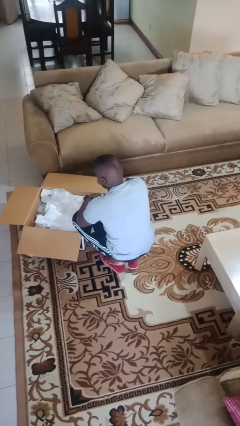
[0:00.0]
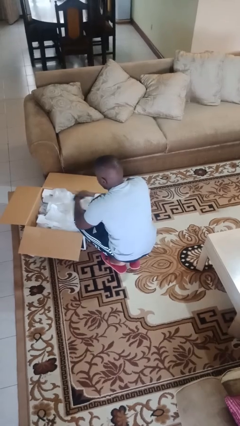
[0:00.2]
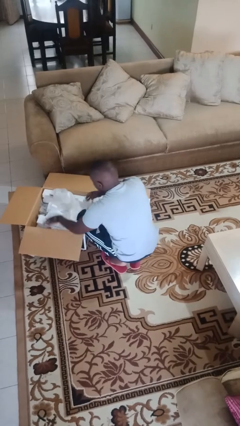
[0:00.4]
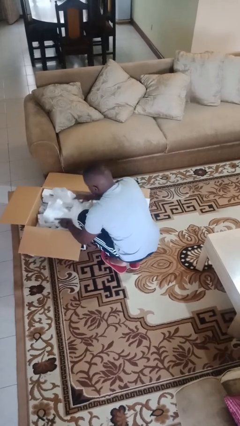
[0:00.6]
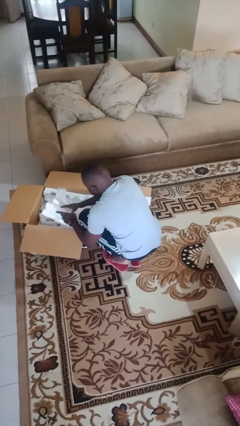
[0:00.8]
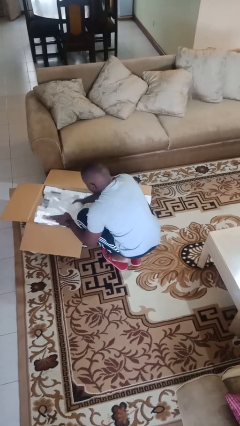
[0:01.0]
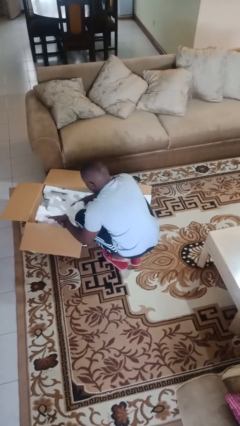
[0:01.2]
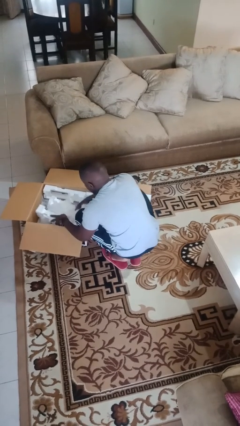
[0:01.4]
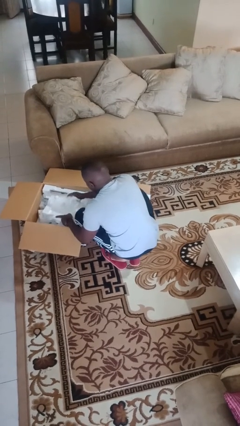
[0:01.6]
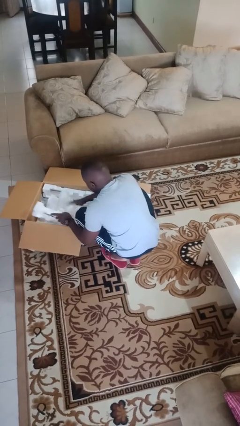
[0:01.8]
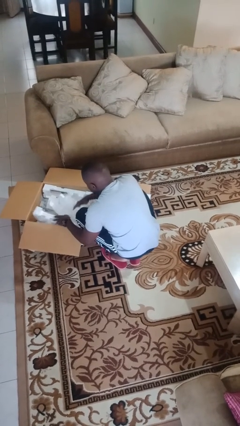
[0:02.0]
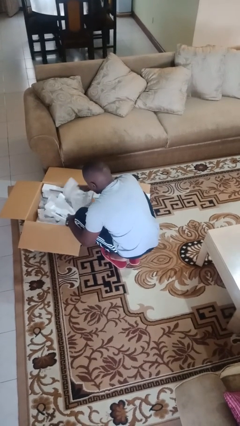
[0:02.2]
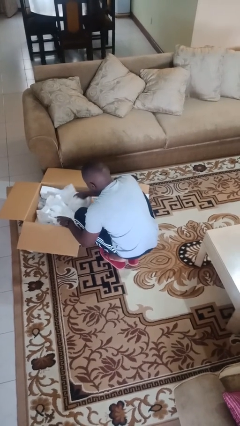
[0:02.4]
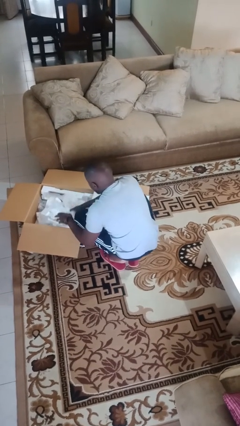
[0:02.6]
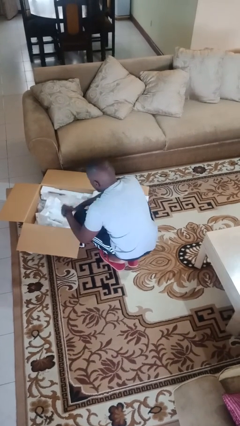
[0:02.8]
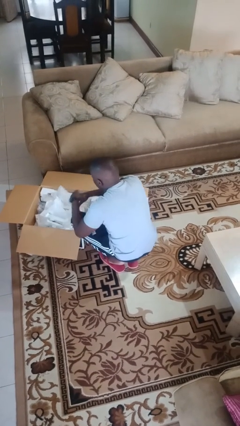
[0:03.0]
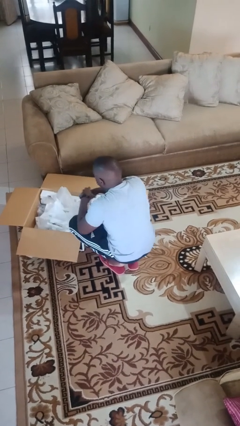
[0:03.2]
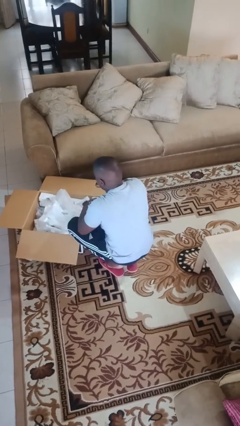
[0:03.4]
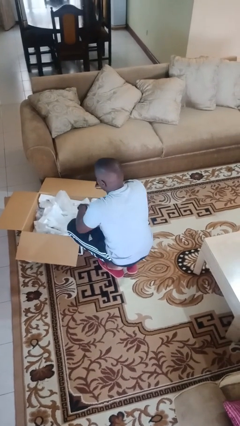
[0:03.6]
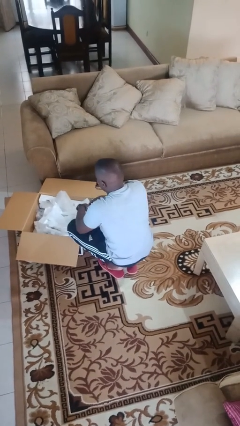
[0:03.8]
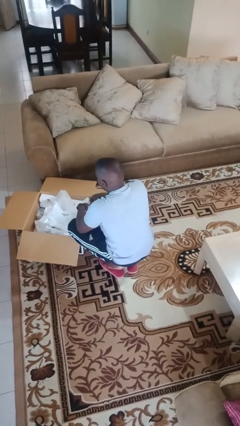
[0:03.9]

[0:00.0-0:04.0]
person searches in box

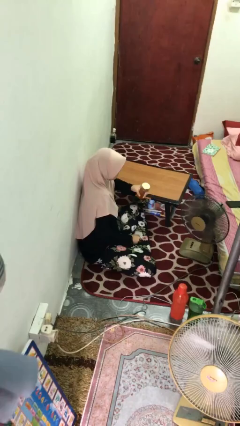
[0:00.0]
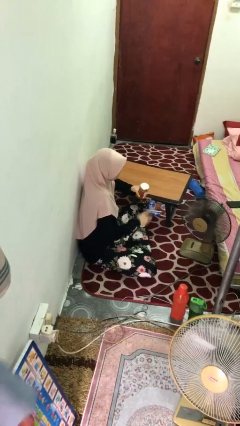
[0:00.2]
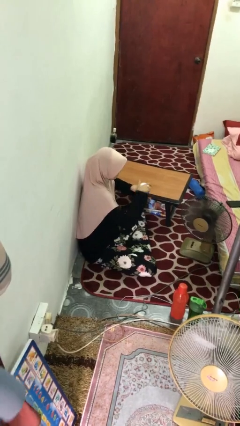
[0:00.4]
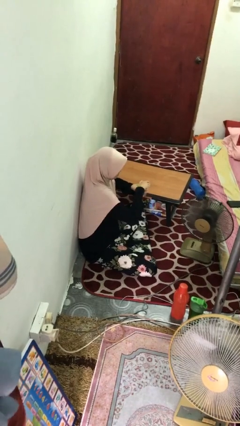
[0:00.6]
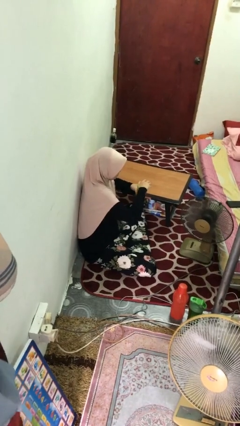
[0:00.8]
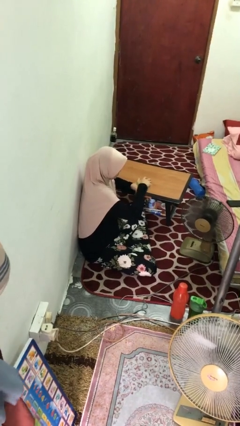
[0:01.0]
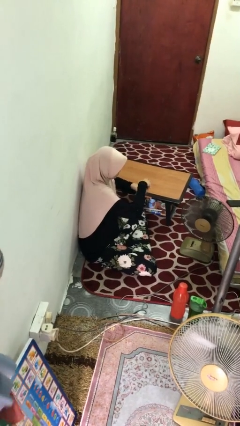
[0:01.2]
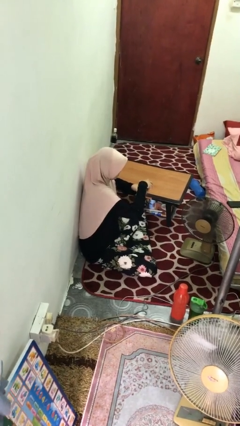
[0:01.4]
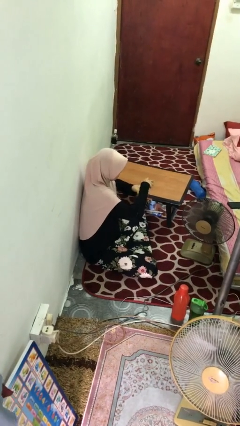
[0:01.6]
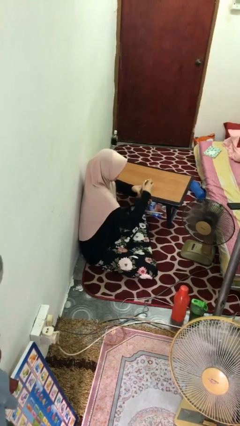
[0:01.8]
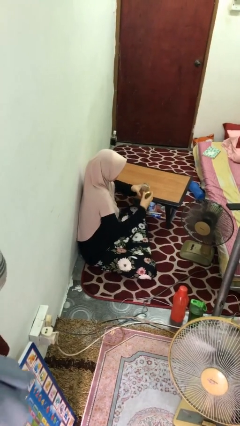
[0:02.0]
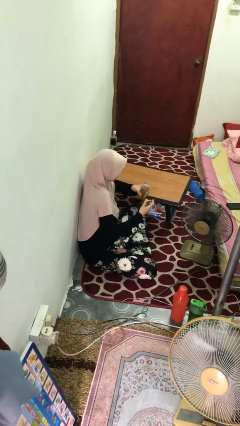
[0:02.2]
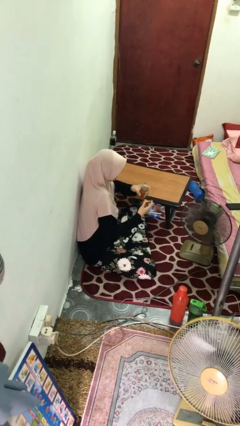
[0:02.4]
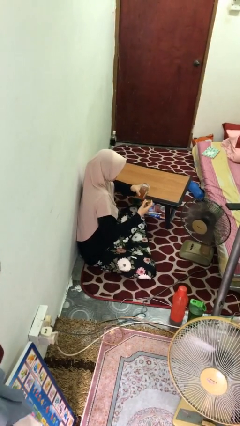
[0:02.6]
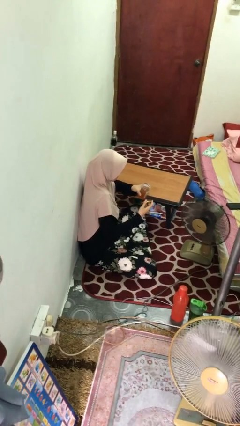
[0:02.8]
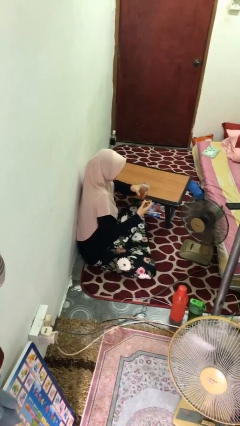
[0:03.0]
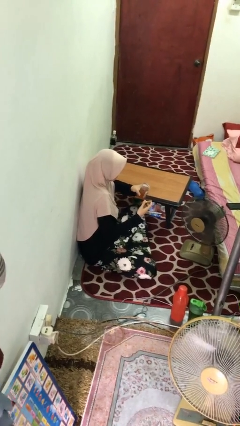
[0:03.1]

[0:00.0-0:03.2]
person opens jar

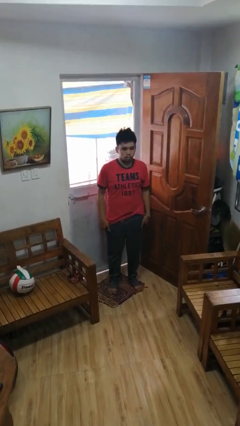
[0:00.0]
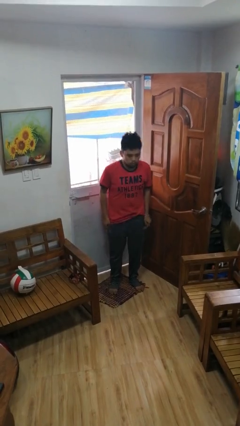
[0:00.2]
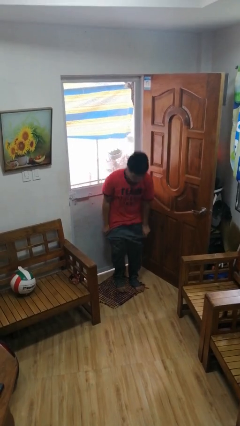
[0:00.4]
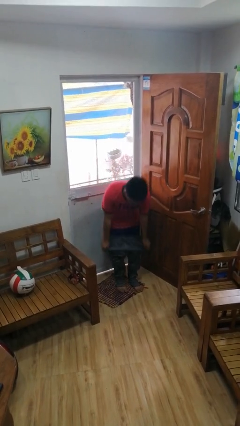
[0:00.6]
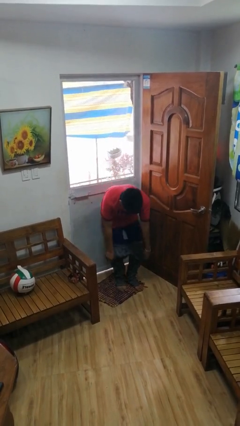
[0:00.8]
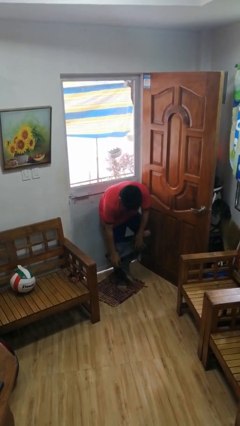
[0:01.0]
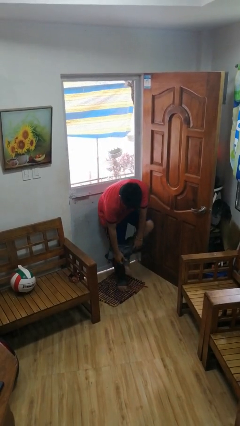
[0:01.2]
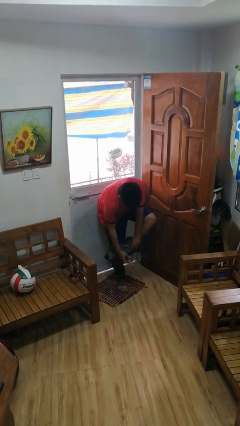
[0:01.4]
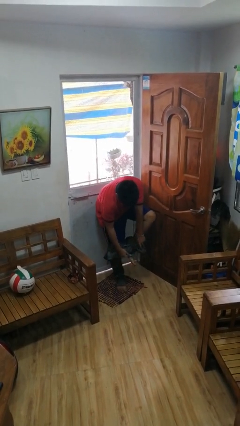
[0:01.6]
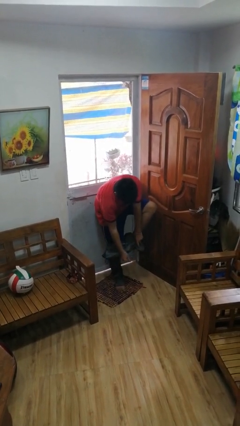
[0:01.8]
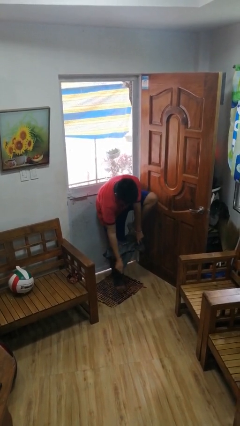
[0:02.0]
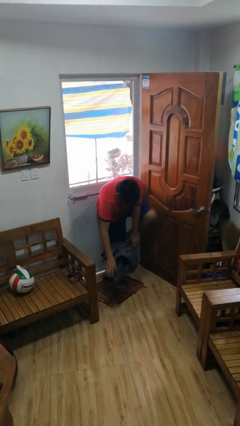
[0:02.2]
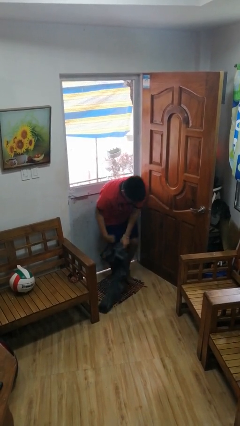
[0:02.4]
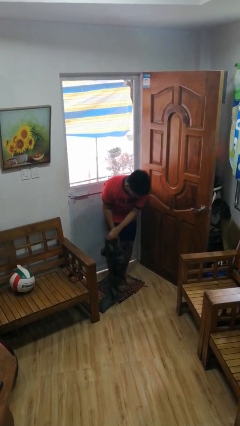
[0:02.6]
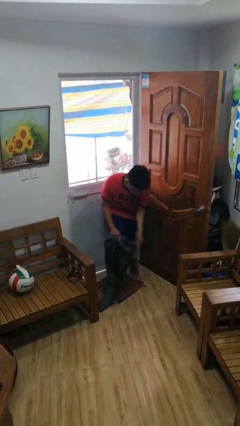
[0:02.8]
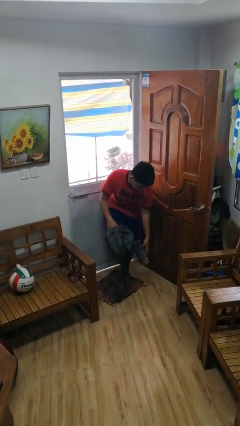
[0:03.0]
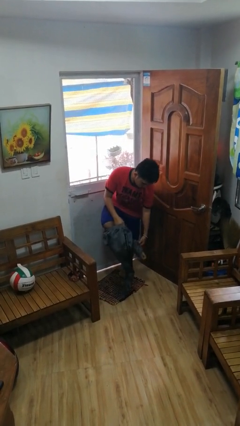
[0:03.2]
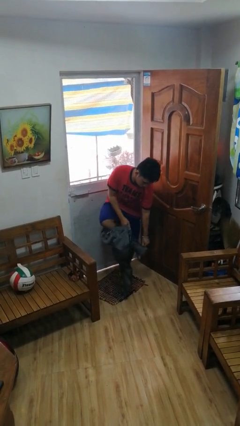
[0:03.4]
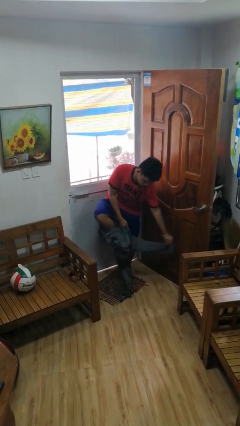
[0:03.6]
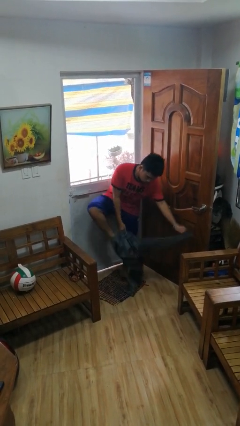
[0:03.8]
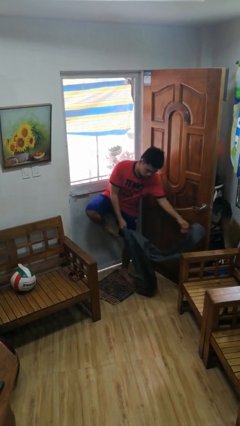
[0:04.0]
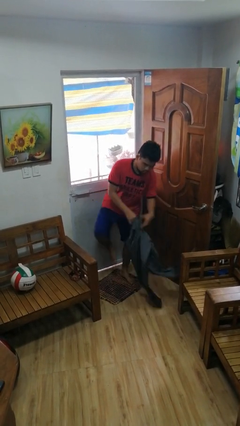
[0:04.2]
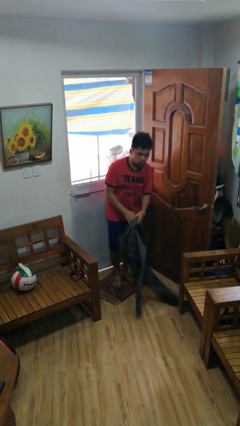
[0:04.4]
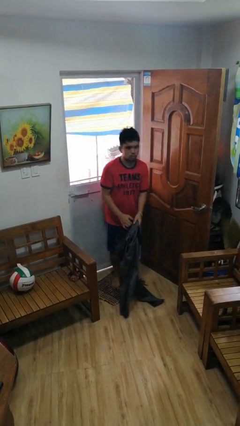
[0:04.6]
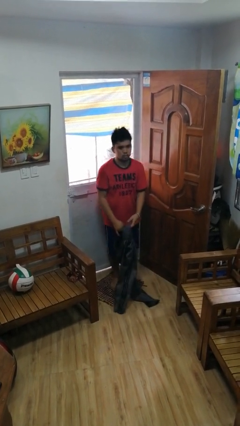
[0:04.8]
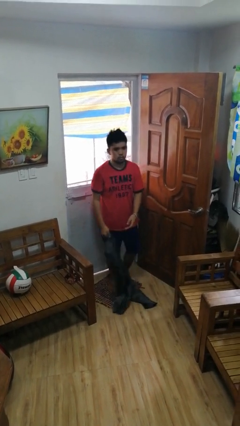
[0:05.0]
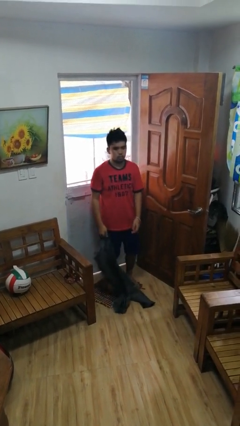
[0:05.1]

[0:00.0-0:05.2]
person takes off pants

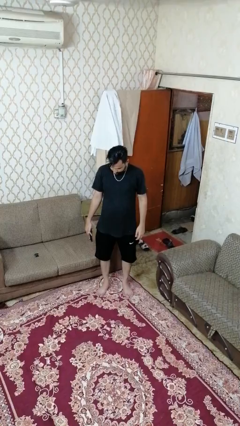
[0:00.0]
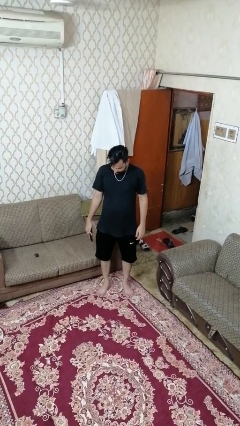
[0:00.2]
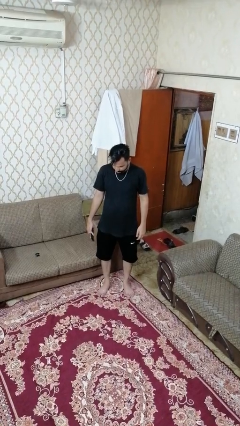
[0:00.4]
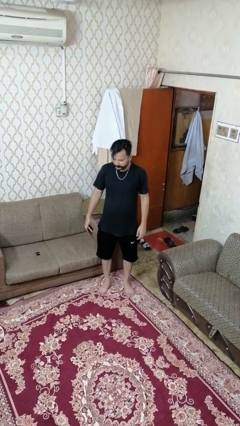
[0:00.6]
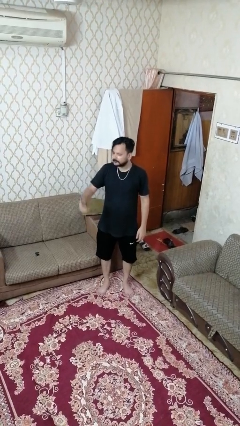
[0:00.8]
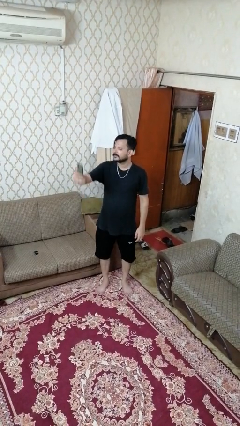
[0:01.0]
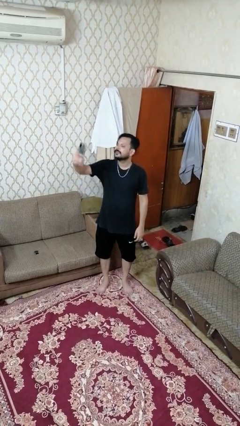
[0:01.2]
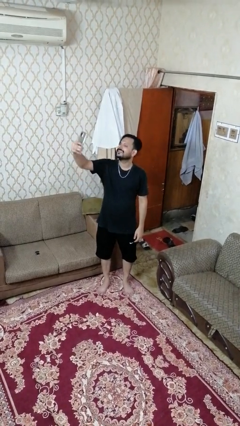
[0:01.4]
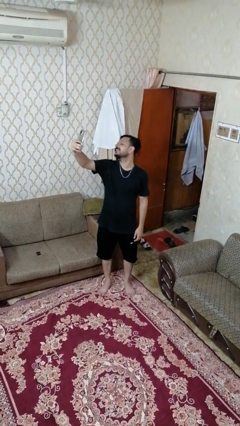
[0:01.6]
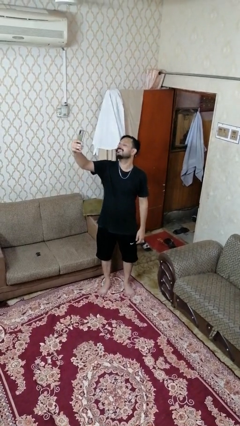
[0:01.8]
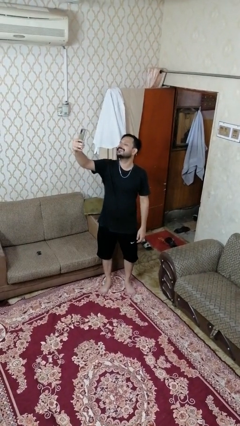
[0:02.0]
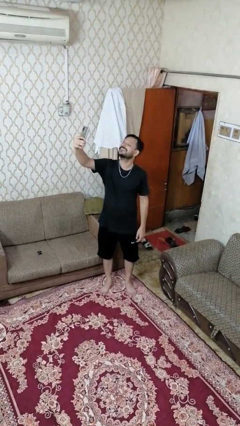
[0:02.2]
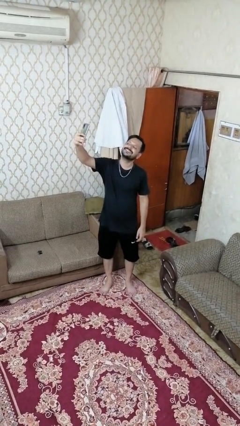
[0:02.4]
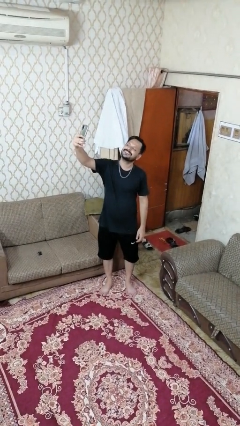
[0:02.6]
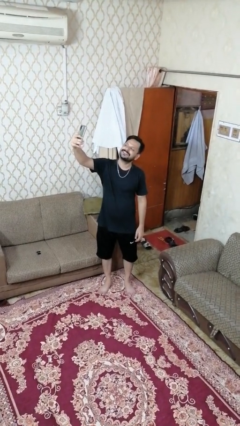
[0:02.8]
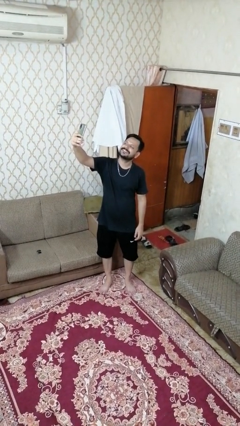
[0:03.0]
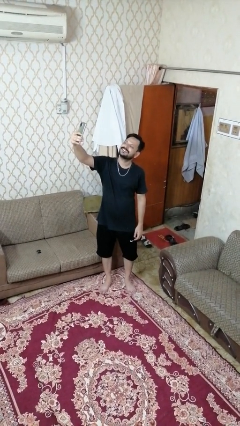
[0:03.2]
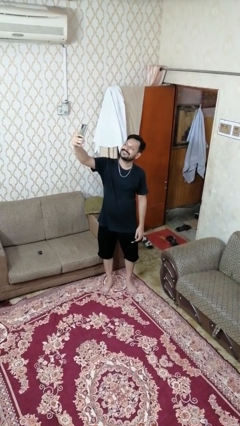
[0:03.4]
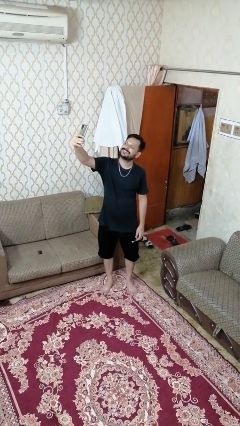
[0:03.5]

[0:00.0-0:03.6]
person takes selfie

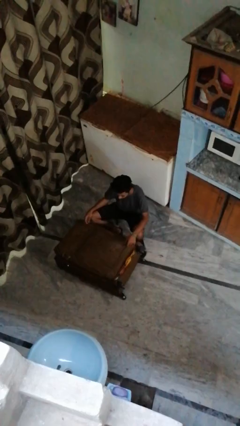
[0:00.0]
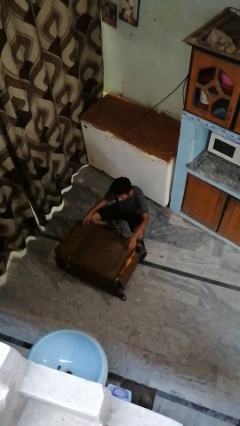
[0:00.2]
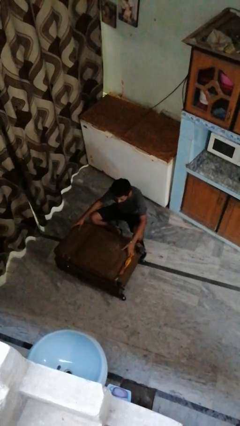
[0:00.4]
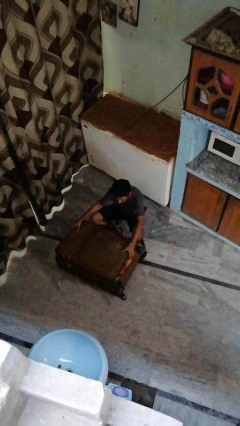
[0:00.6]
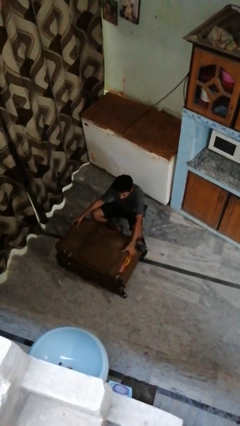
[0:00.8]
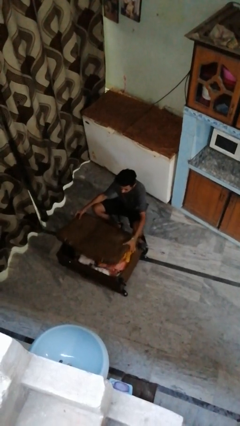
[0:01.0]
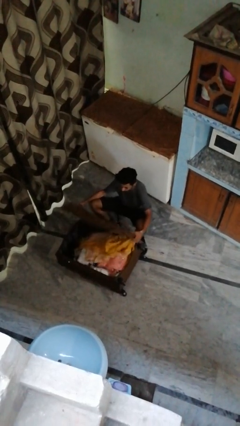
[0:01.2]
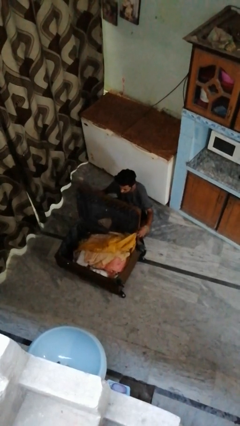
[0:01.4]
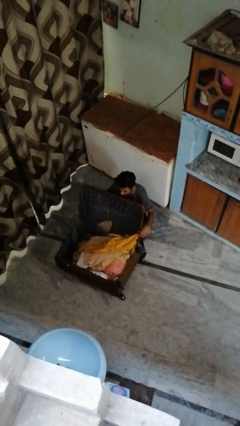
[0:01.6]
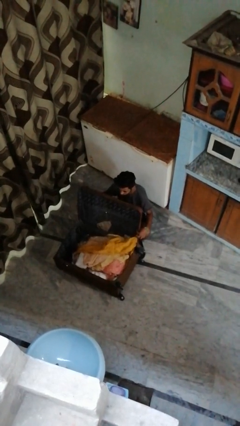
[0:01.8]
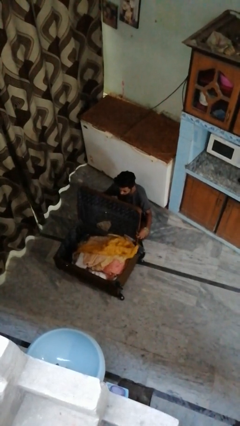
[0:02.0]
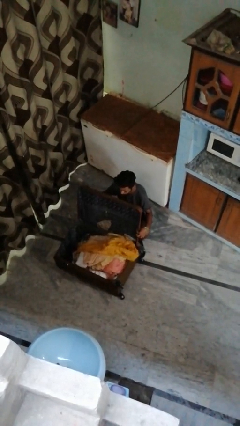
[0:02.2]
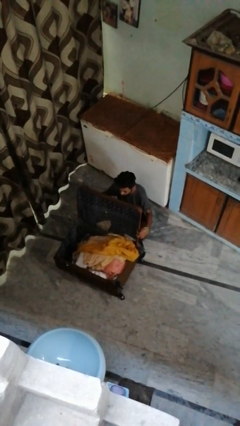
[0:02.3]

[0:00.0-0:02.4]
person opens suitcase
